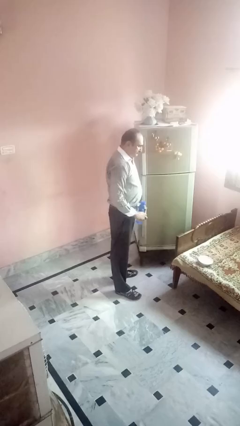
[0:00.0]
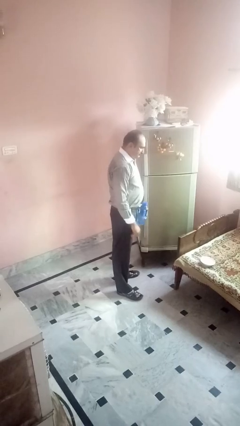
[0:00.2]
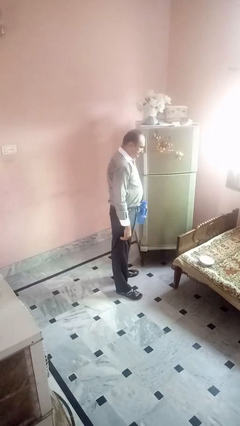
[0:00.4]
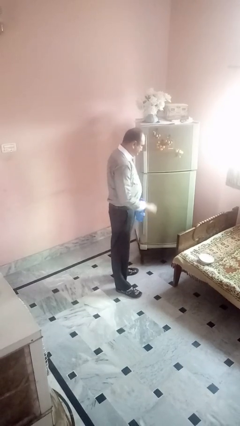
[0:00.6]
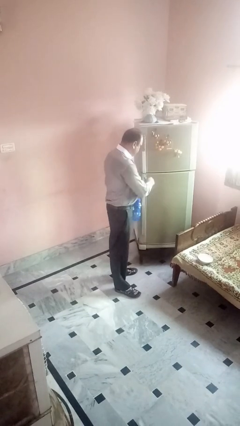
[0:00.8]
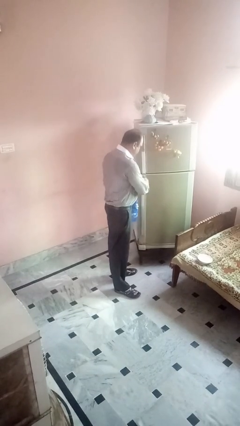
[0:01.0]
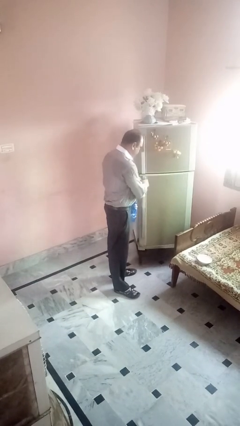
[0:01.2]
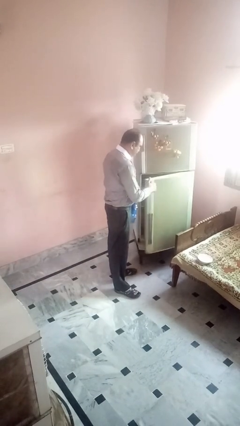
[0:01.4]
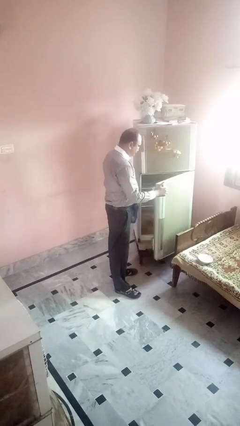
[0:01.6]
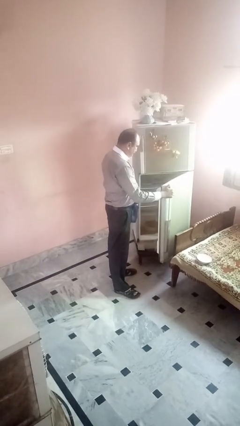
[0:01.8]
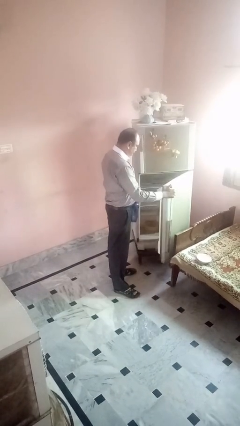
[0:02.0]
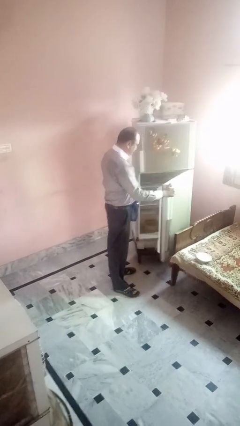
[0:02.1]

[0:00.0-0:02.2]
person opens refrigerator

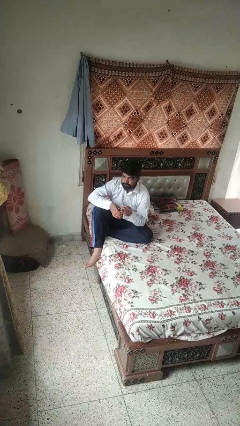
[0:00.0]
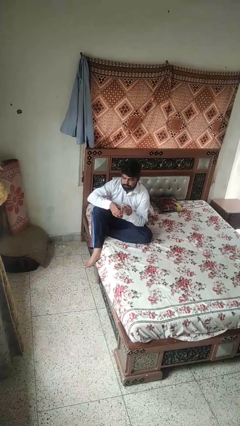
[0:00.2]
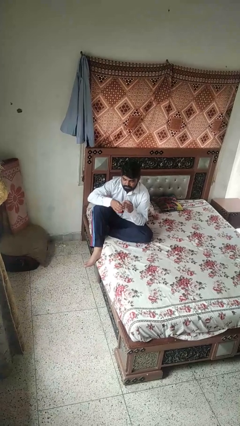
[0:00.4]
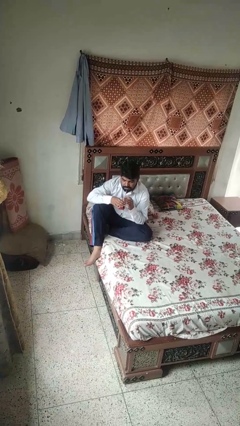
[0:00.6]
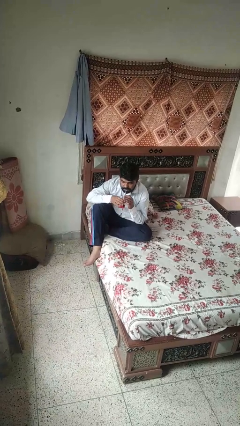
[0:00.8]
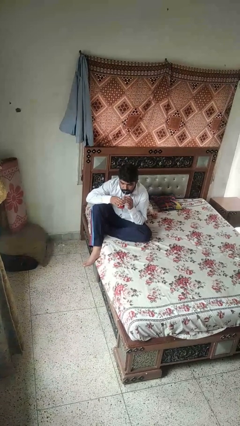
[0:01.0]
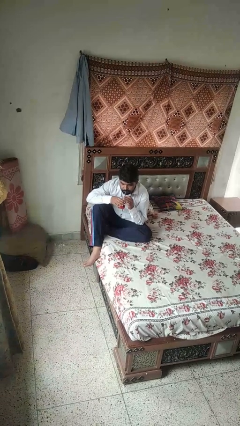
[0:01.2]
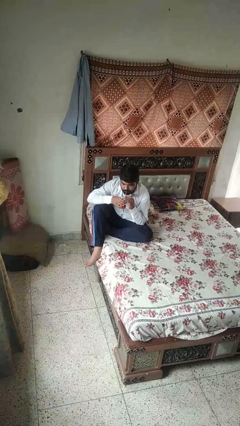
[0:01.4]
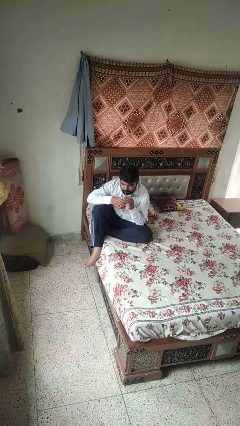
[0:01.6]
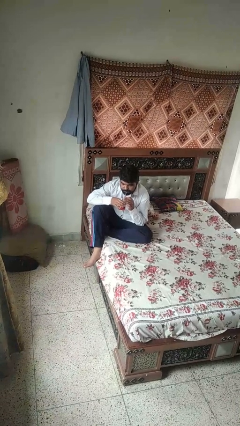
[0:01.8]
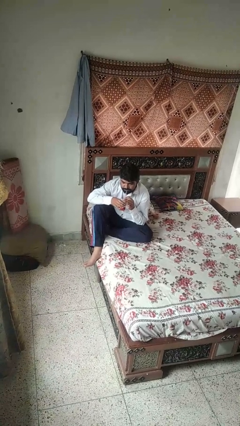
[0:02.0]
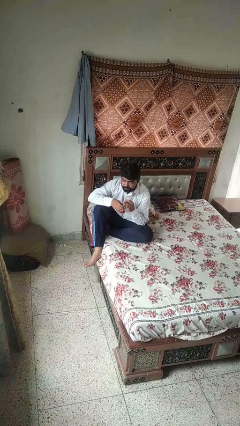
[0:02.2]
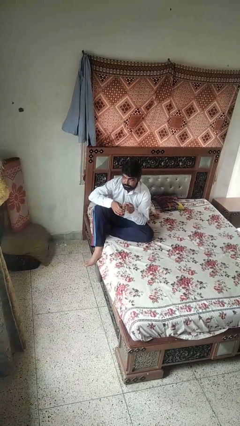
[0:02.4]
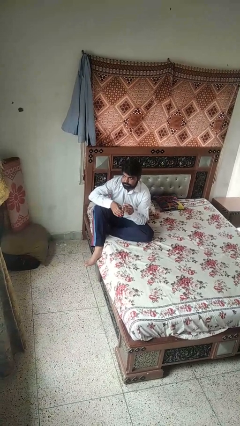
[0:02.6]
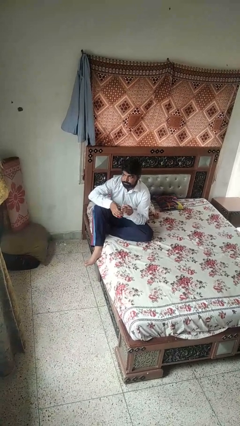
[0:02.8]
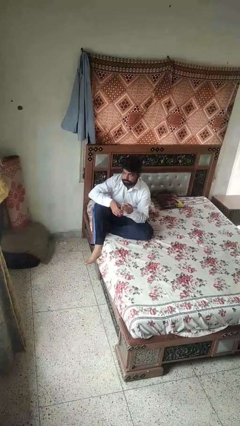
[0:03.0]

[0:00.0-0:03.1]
person drinks from straw

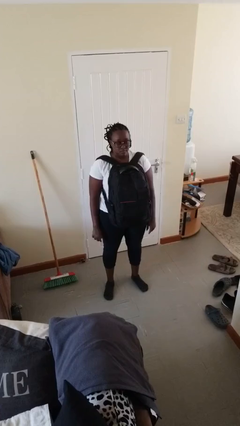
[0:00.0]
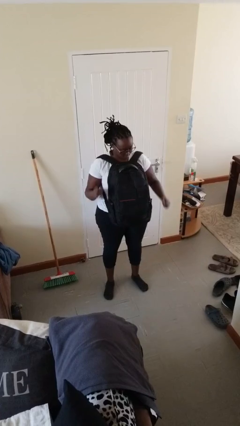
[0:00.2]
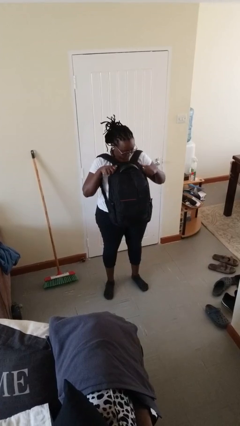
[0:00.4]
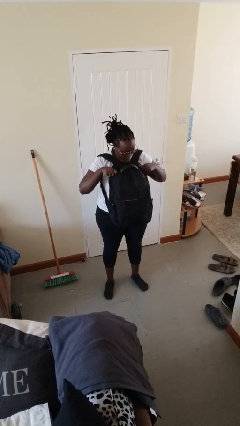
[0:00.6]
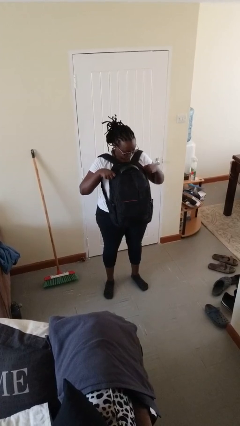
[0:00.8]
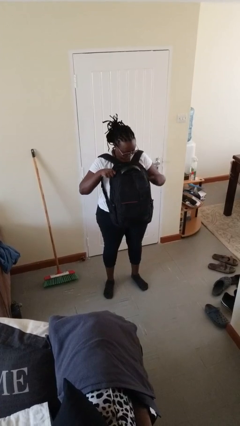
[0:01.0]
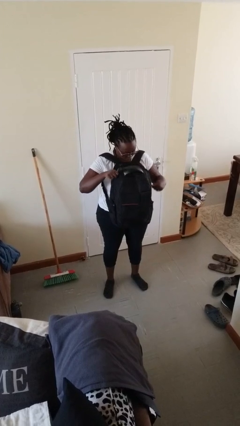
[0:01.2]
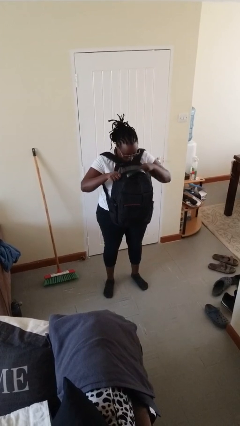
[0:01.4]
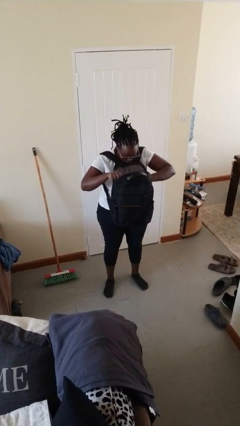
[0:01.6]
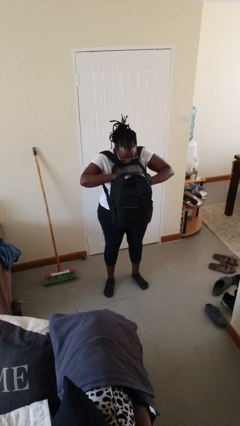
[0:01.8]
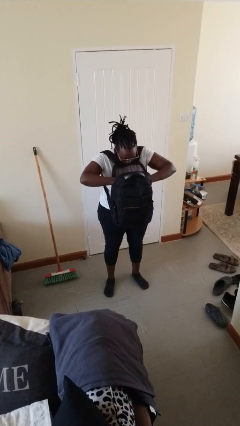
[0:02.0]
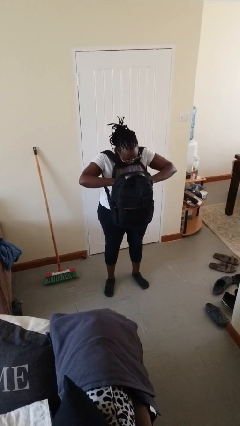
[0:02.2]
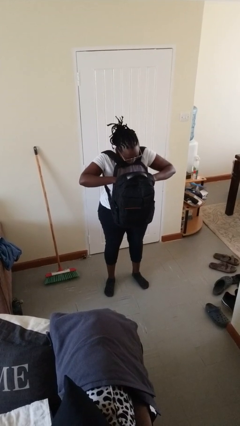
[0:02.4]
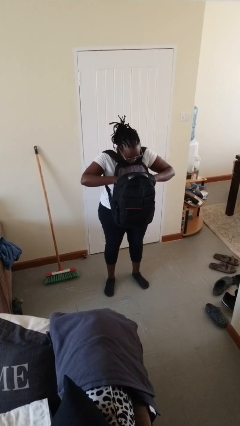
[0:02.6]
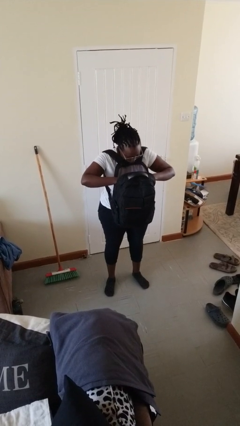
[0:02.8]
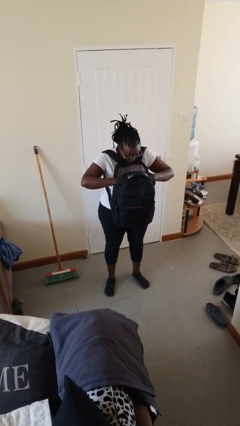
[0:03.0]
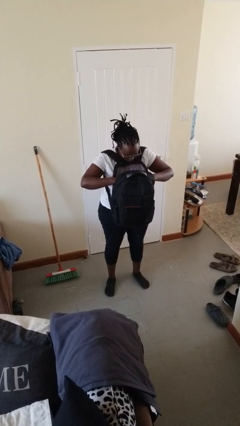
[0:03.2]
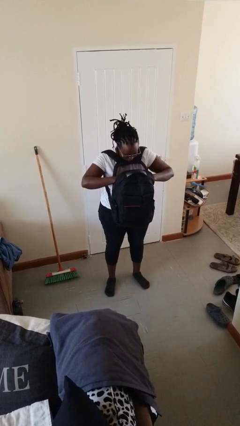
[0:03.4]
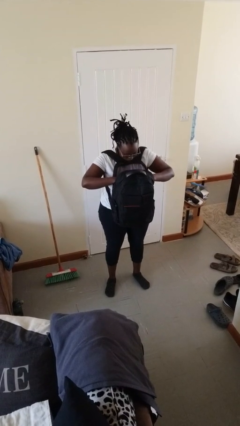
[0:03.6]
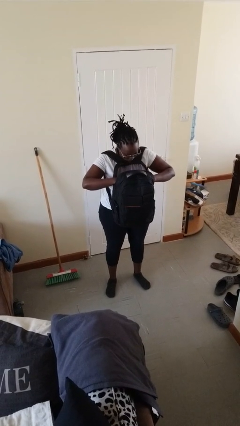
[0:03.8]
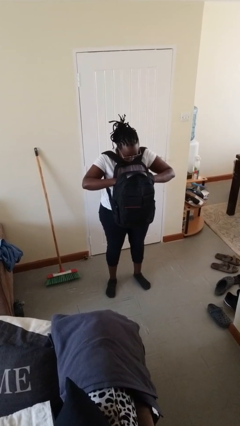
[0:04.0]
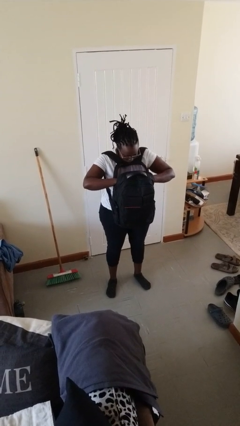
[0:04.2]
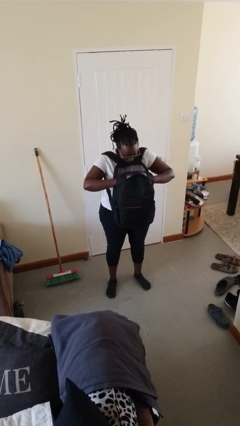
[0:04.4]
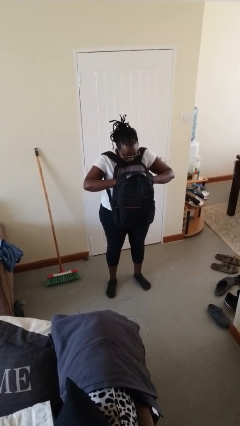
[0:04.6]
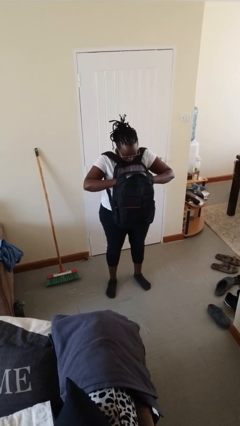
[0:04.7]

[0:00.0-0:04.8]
person searches in backpack

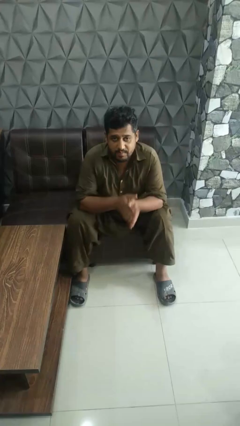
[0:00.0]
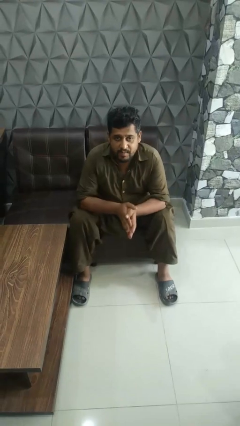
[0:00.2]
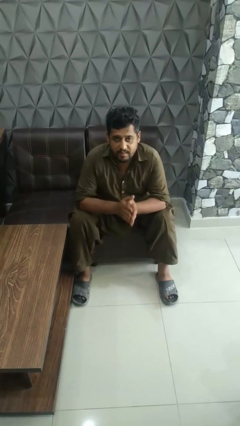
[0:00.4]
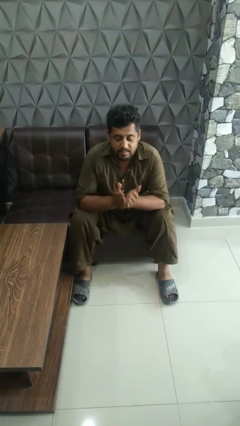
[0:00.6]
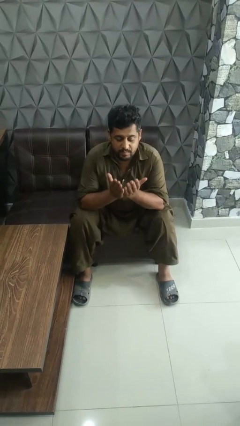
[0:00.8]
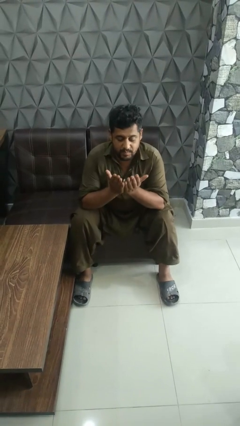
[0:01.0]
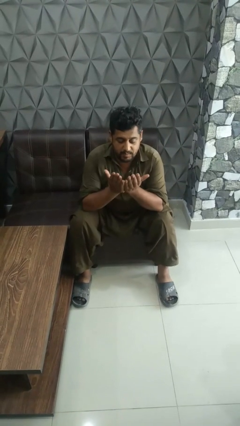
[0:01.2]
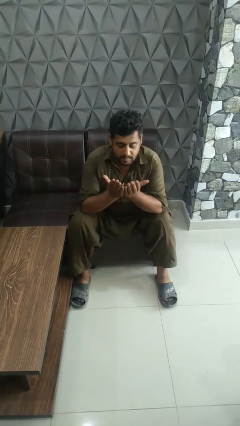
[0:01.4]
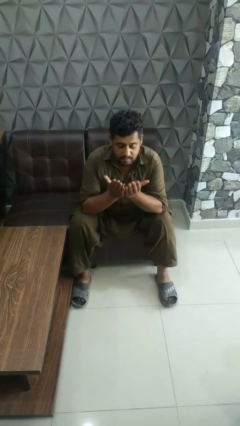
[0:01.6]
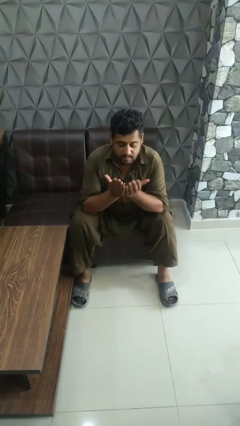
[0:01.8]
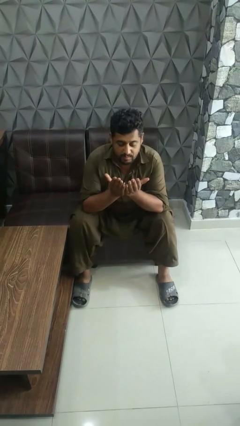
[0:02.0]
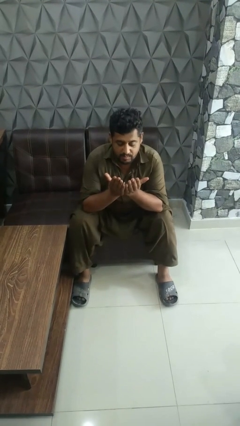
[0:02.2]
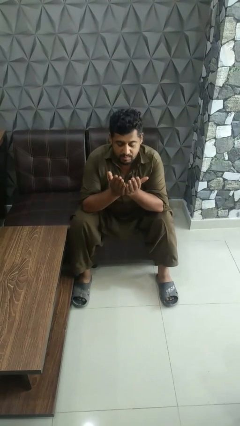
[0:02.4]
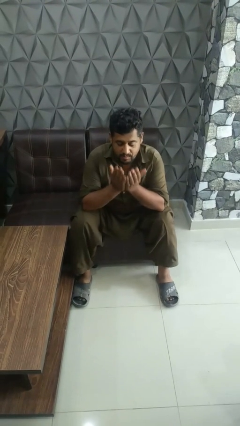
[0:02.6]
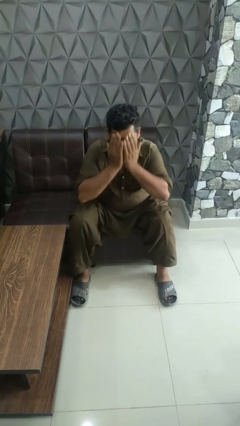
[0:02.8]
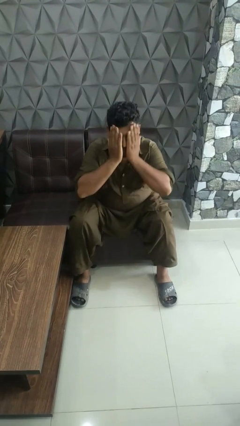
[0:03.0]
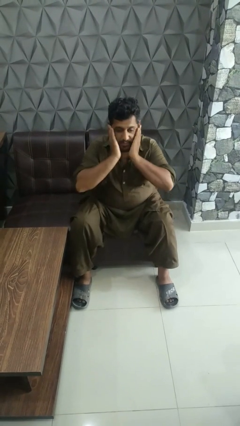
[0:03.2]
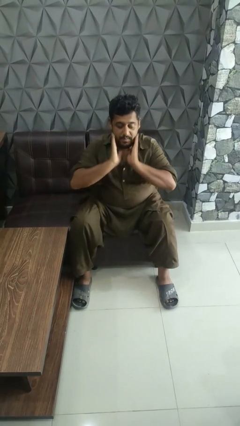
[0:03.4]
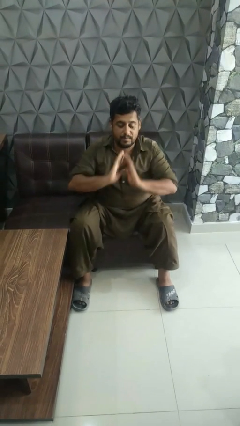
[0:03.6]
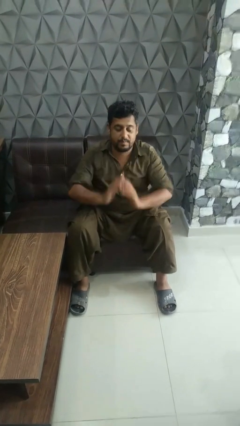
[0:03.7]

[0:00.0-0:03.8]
person prays

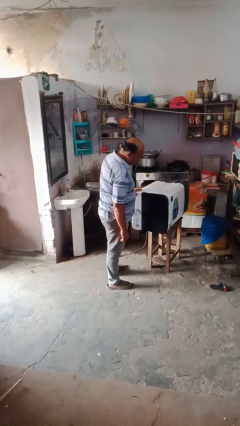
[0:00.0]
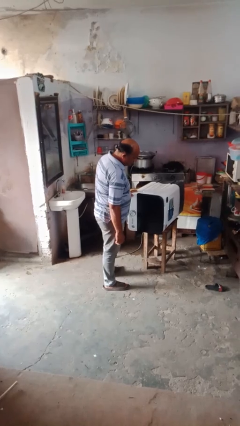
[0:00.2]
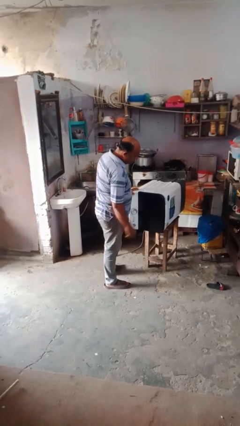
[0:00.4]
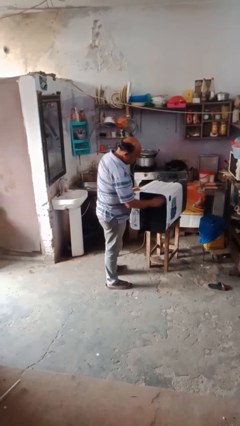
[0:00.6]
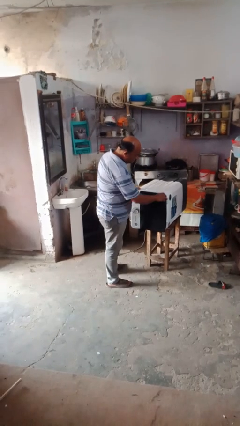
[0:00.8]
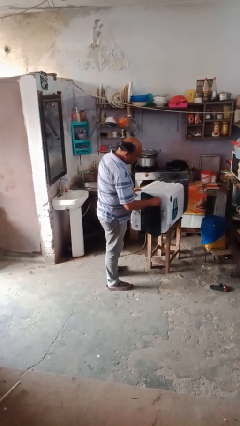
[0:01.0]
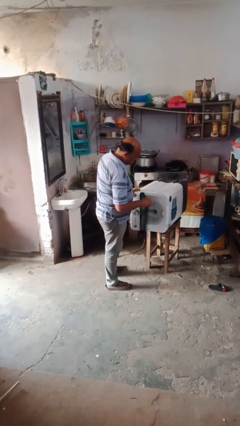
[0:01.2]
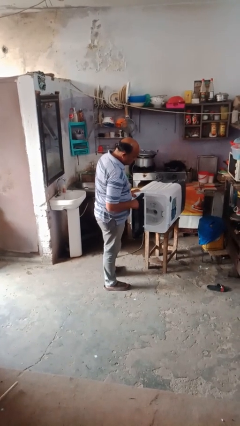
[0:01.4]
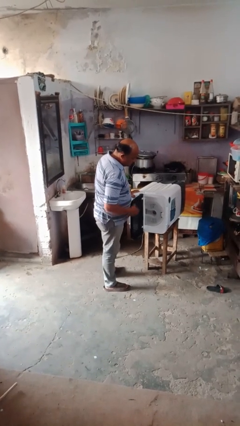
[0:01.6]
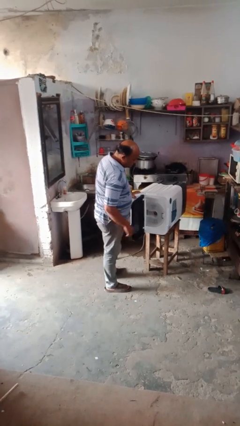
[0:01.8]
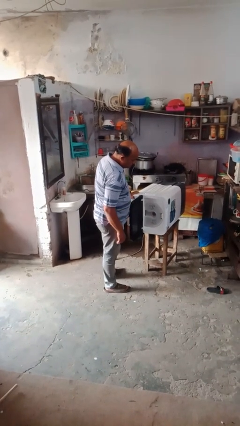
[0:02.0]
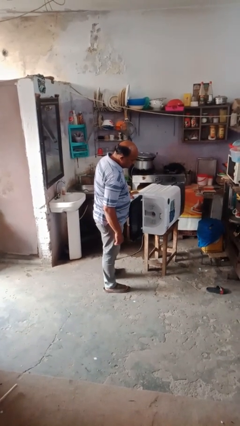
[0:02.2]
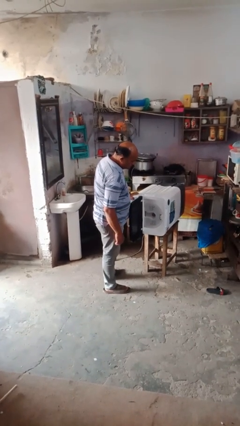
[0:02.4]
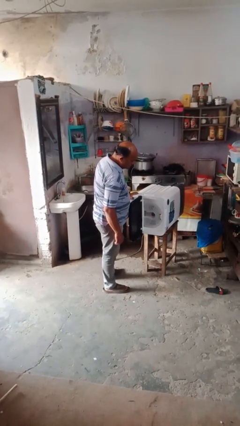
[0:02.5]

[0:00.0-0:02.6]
person opens dishwasher

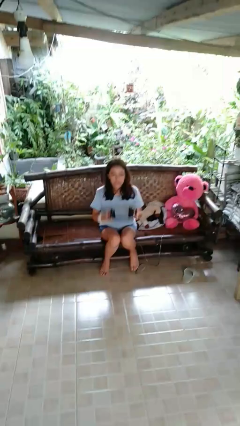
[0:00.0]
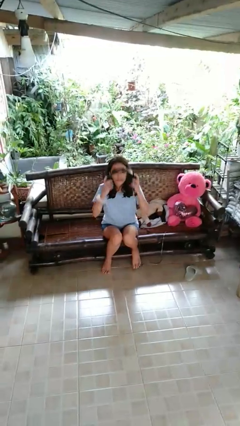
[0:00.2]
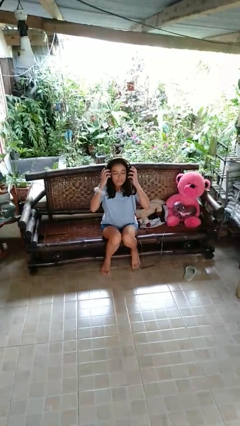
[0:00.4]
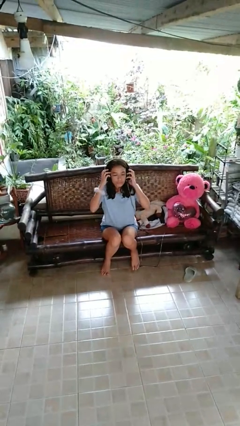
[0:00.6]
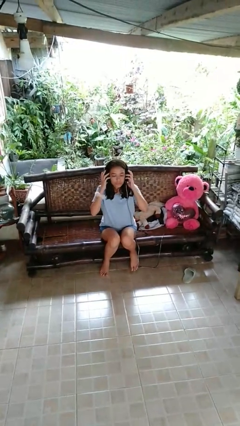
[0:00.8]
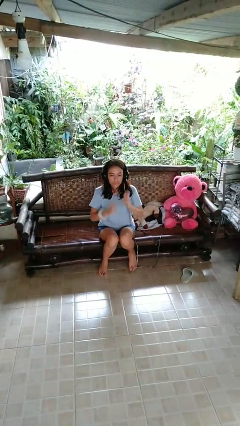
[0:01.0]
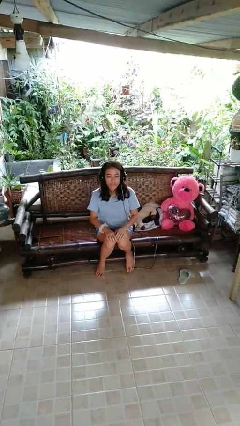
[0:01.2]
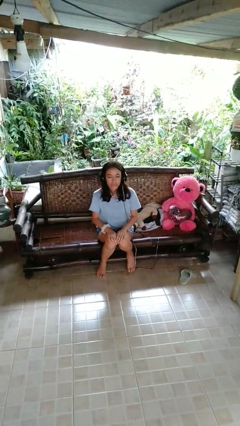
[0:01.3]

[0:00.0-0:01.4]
person puts on headphones
